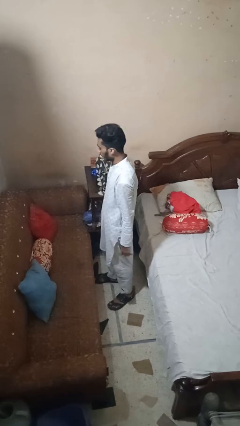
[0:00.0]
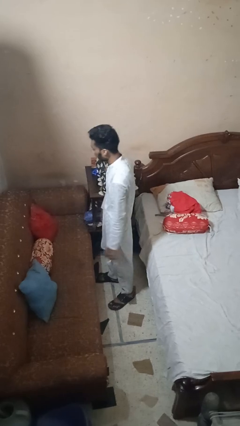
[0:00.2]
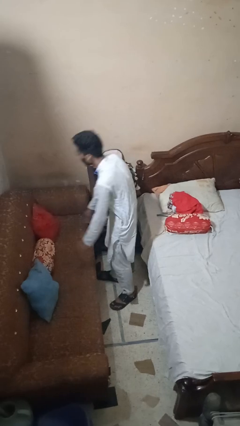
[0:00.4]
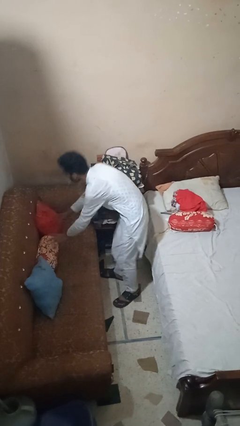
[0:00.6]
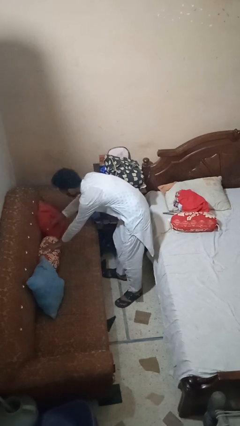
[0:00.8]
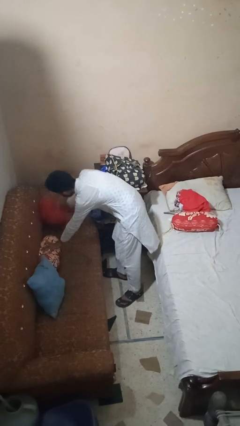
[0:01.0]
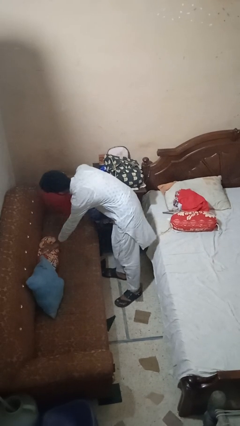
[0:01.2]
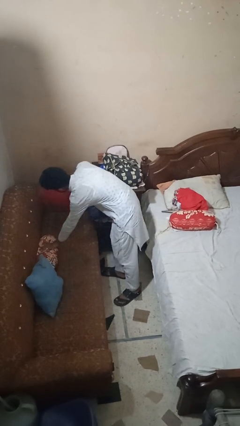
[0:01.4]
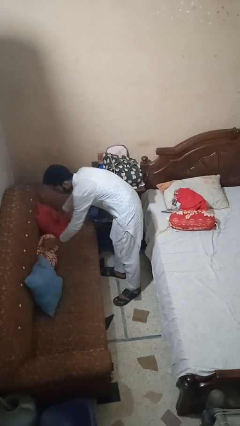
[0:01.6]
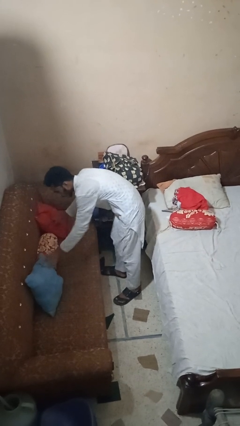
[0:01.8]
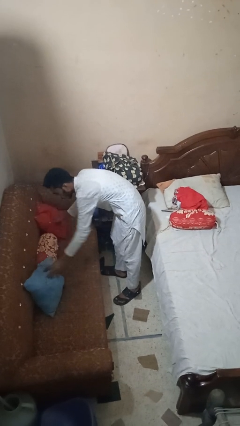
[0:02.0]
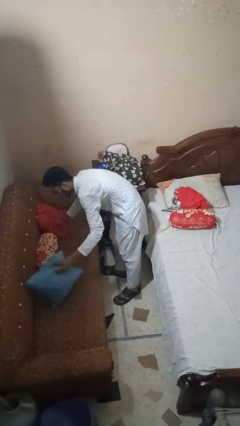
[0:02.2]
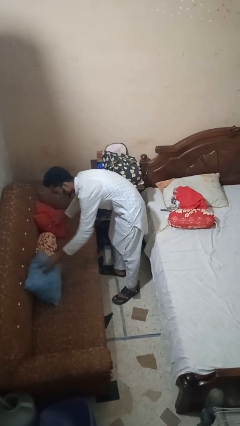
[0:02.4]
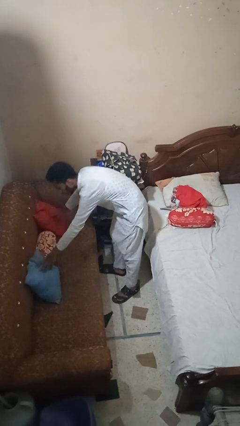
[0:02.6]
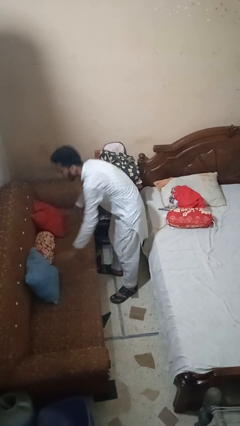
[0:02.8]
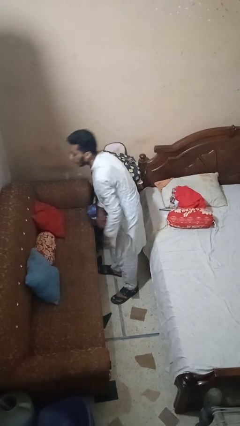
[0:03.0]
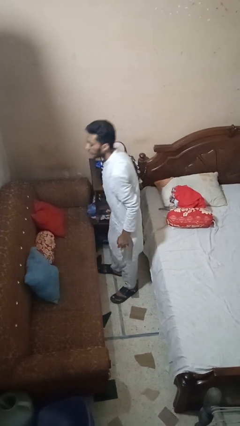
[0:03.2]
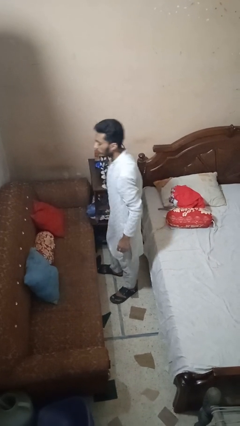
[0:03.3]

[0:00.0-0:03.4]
person searches in couch

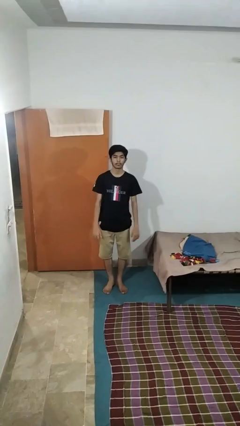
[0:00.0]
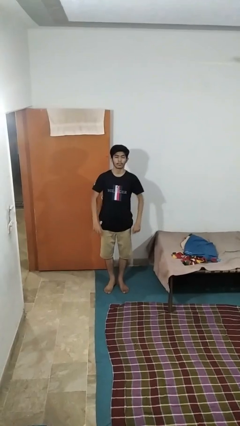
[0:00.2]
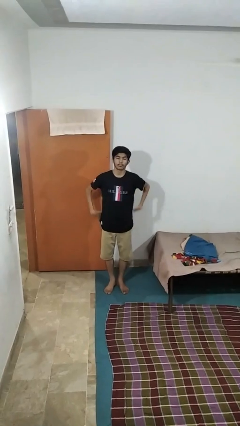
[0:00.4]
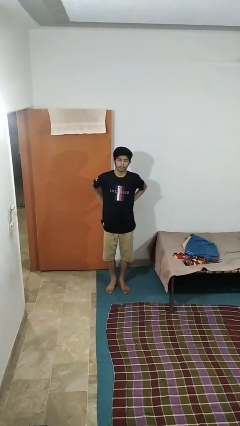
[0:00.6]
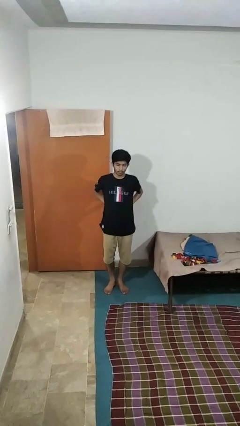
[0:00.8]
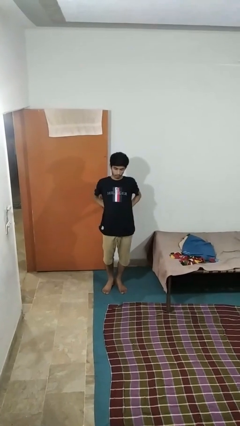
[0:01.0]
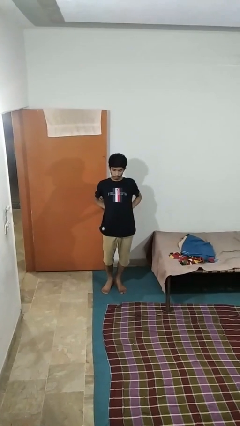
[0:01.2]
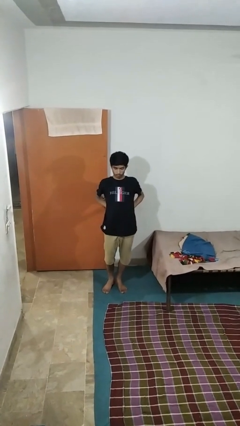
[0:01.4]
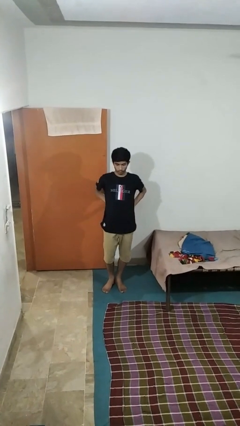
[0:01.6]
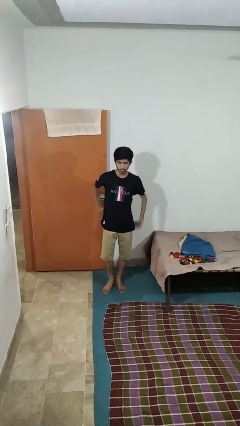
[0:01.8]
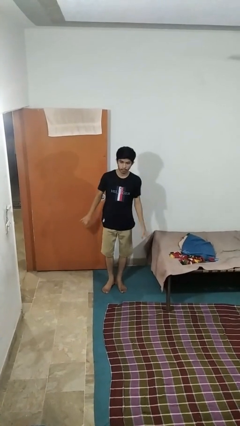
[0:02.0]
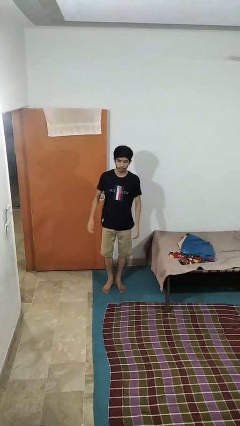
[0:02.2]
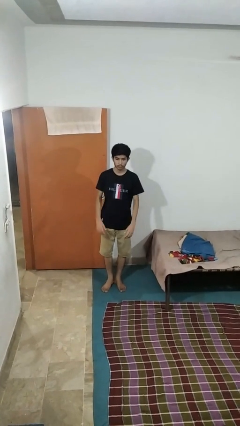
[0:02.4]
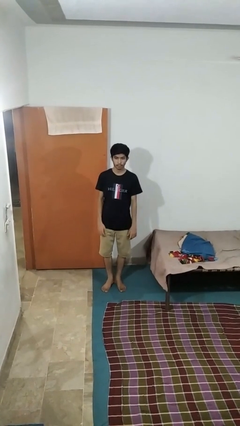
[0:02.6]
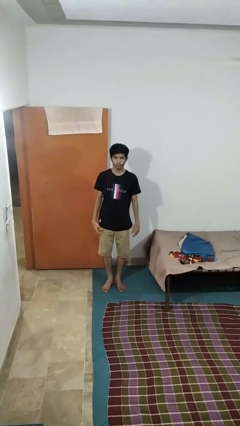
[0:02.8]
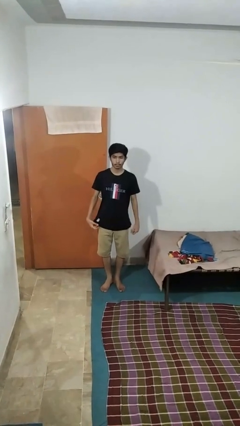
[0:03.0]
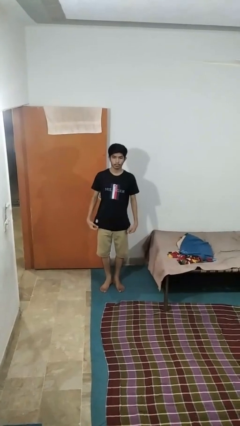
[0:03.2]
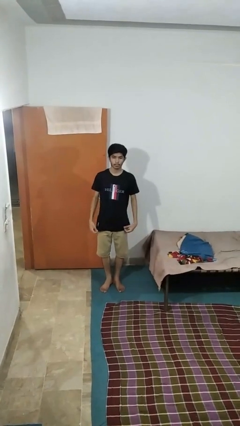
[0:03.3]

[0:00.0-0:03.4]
person stretches back

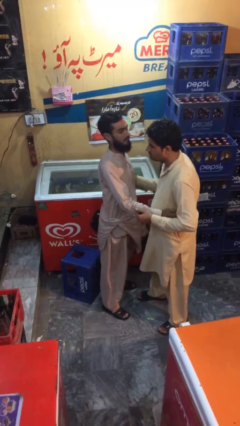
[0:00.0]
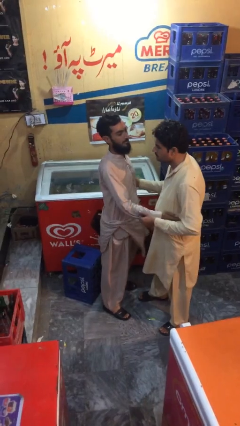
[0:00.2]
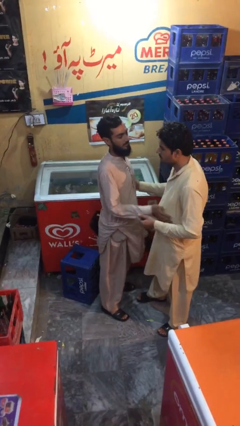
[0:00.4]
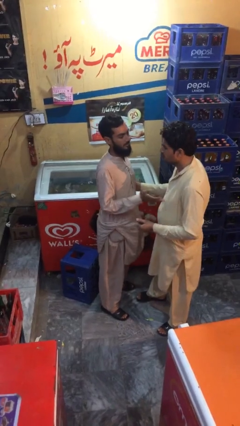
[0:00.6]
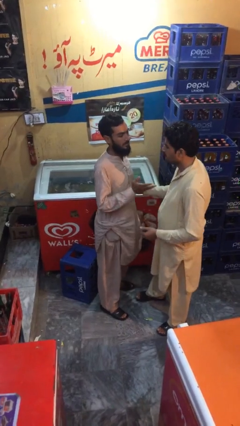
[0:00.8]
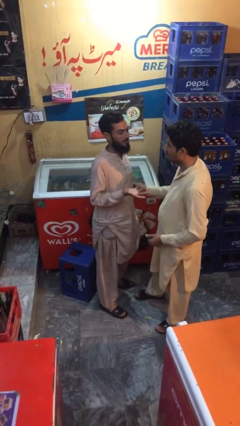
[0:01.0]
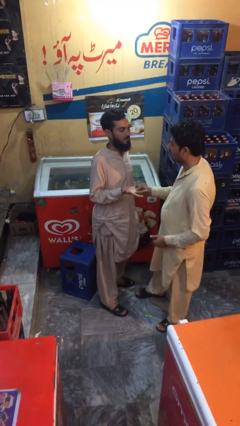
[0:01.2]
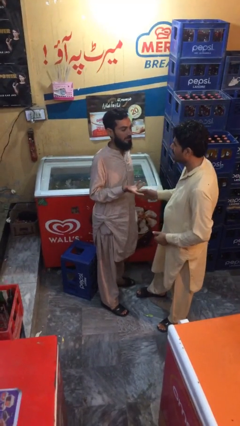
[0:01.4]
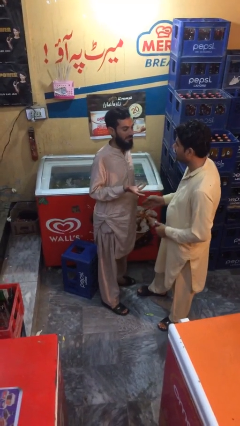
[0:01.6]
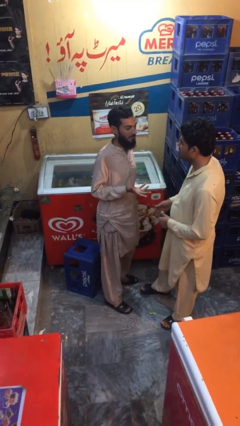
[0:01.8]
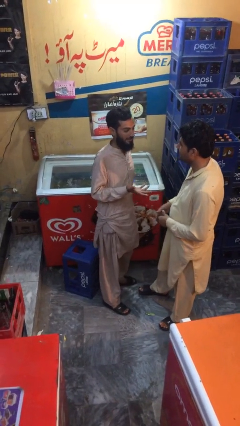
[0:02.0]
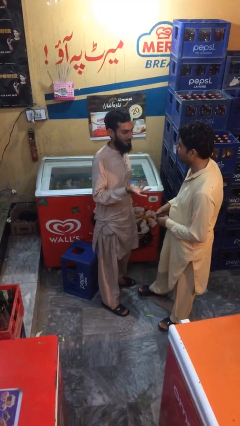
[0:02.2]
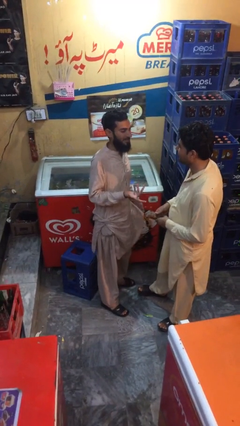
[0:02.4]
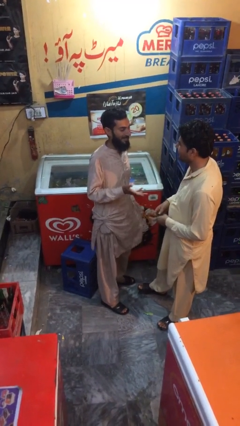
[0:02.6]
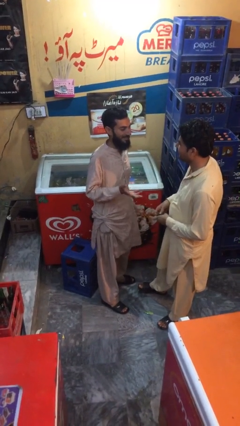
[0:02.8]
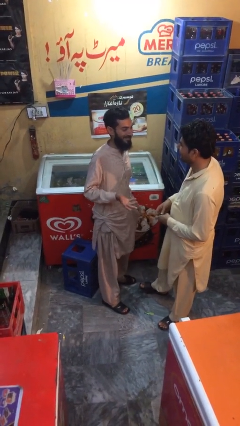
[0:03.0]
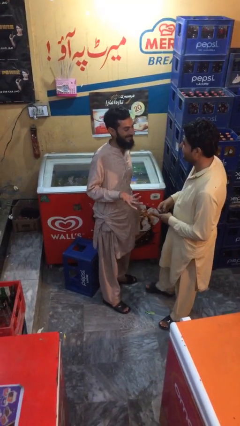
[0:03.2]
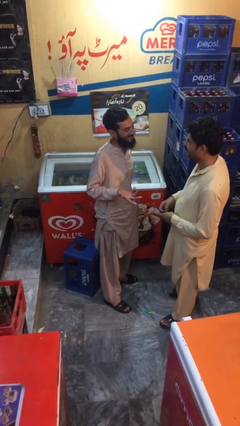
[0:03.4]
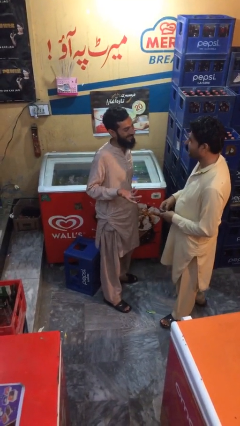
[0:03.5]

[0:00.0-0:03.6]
person talks to person

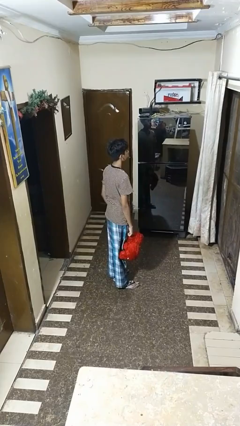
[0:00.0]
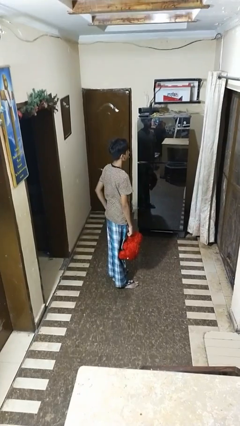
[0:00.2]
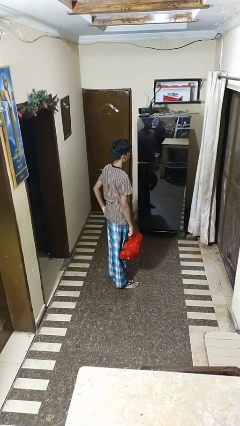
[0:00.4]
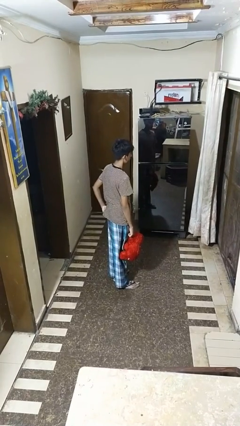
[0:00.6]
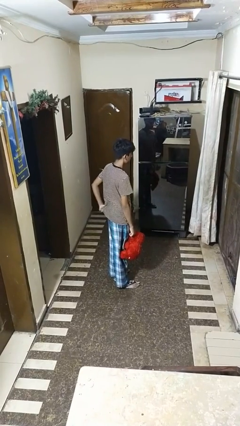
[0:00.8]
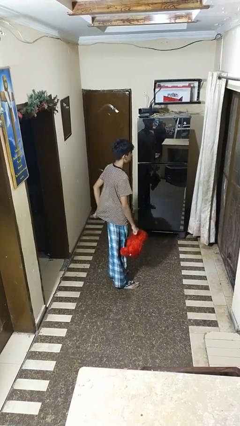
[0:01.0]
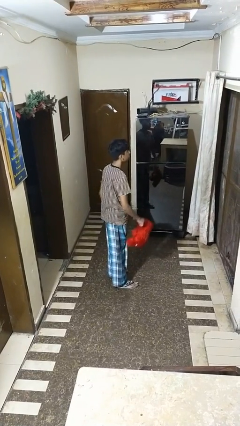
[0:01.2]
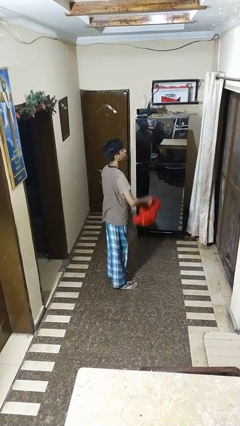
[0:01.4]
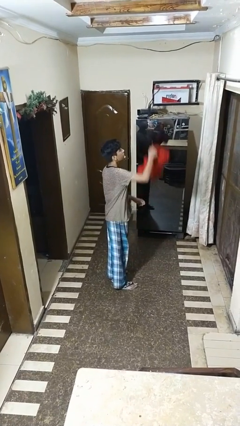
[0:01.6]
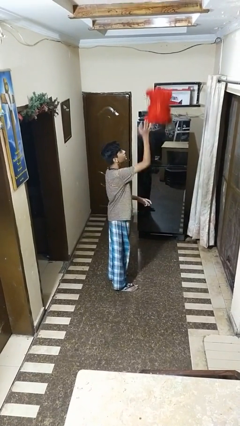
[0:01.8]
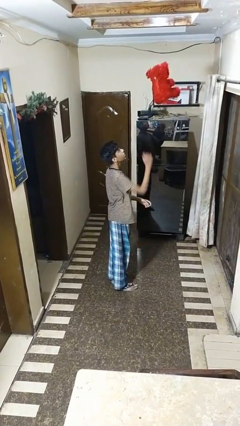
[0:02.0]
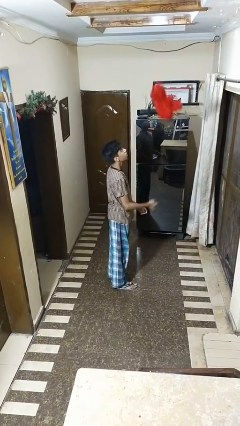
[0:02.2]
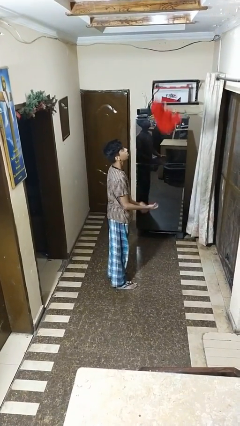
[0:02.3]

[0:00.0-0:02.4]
person drops object

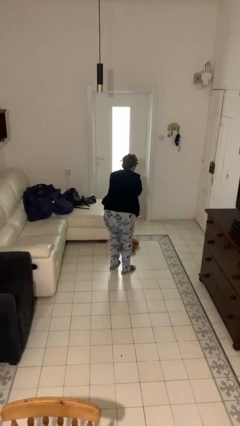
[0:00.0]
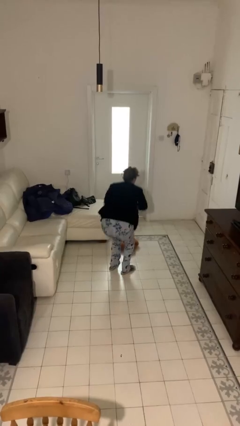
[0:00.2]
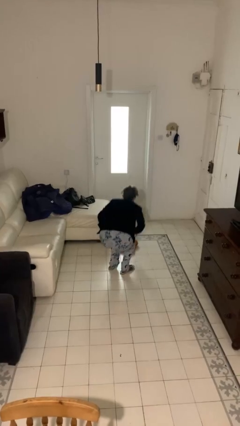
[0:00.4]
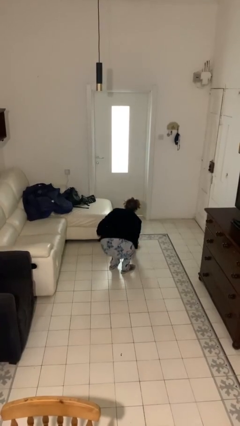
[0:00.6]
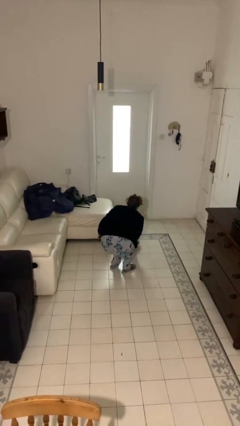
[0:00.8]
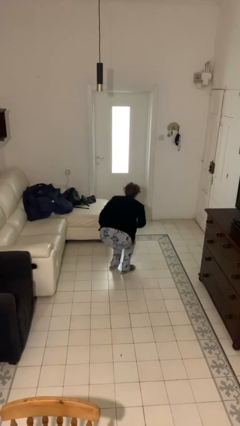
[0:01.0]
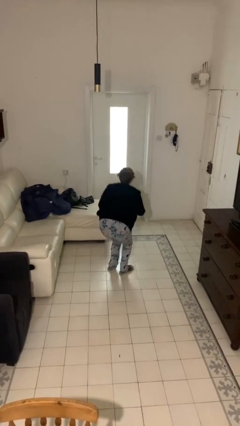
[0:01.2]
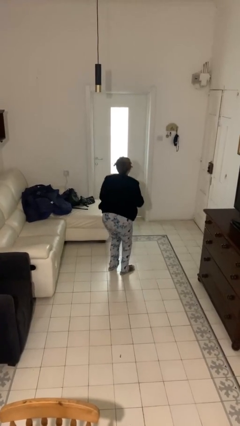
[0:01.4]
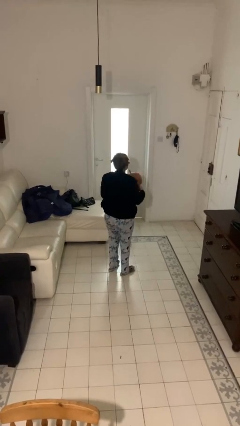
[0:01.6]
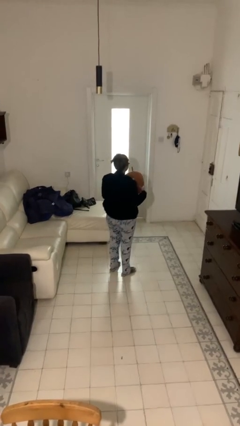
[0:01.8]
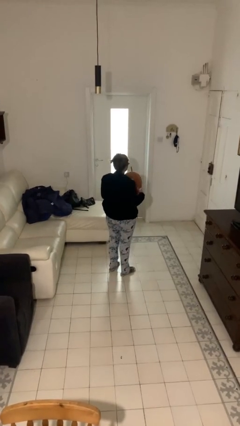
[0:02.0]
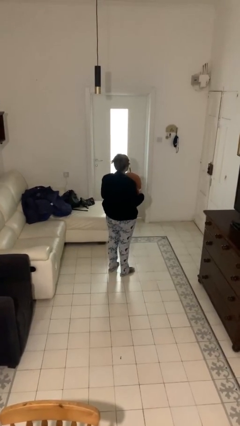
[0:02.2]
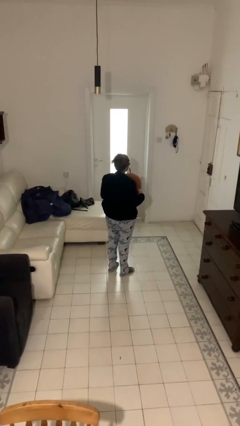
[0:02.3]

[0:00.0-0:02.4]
person picks up object from floor

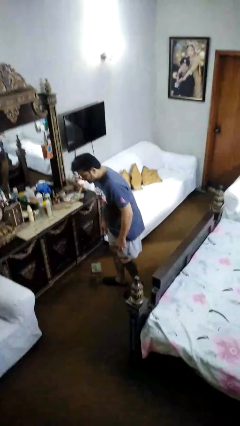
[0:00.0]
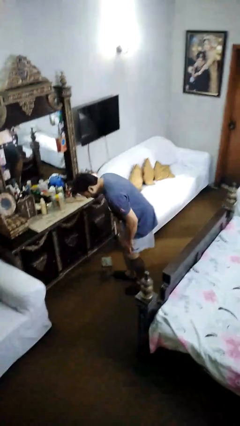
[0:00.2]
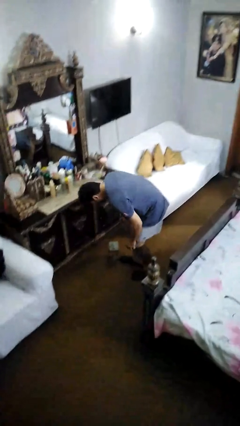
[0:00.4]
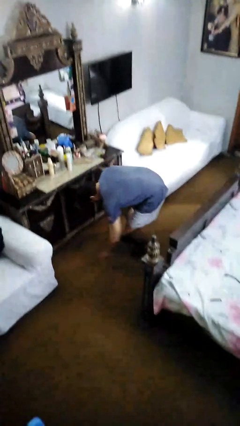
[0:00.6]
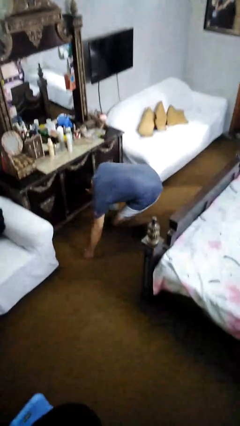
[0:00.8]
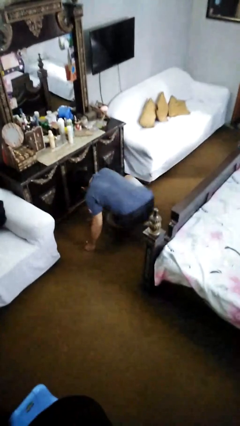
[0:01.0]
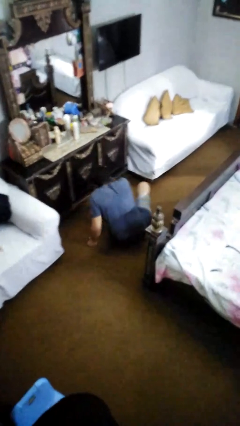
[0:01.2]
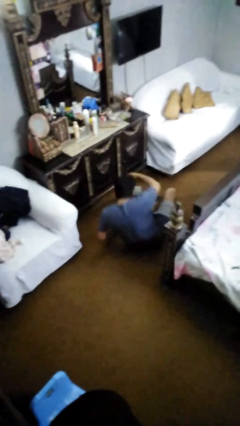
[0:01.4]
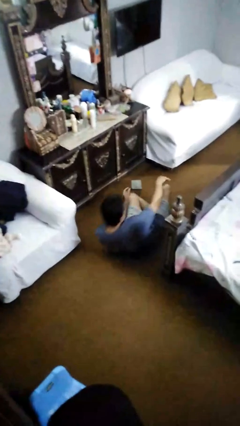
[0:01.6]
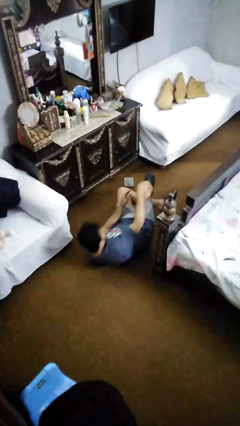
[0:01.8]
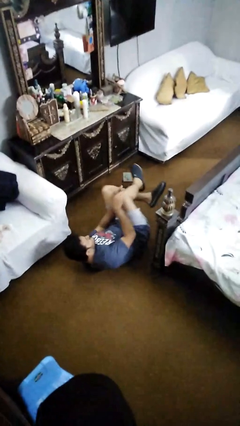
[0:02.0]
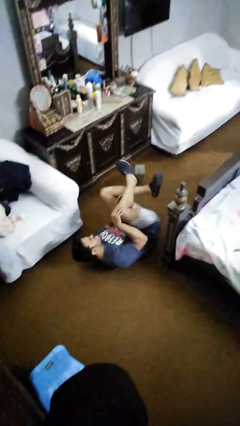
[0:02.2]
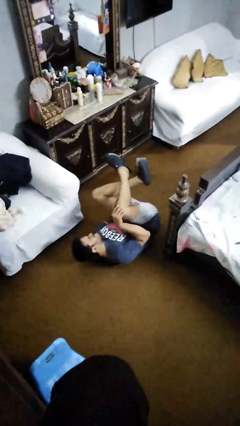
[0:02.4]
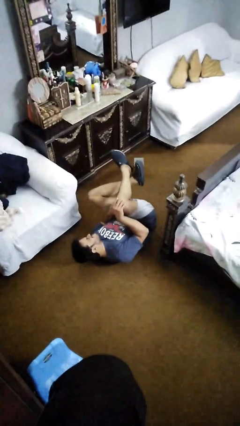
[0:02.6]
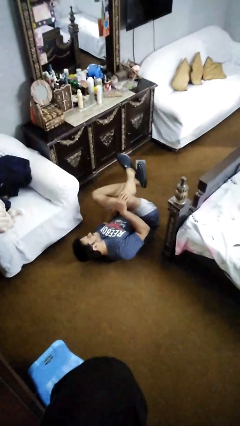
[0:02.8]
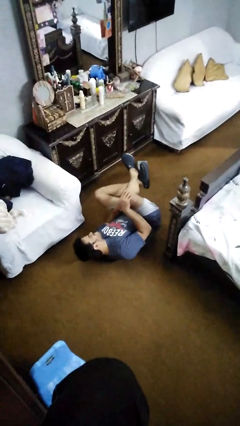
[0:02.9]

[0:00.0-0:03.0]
person lies down on floor
